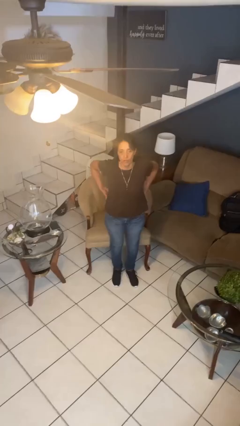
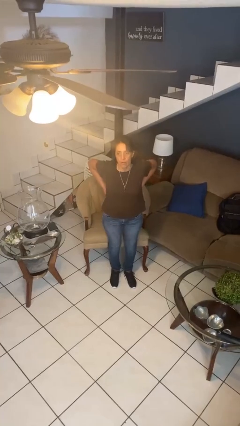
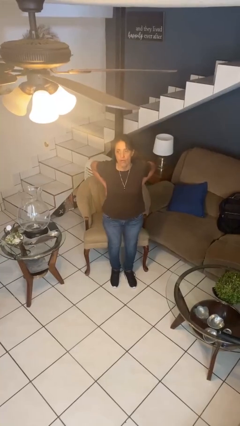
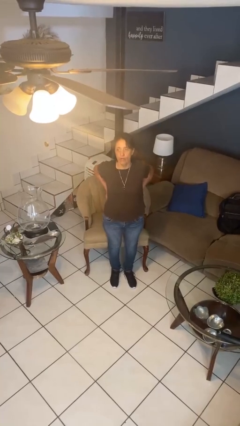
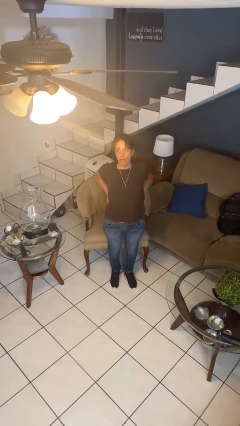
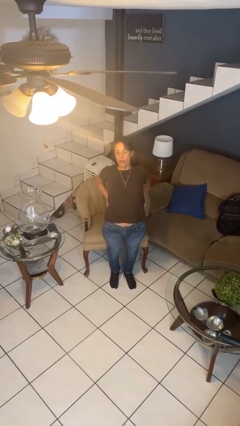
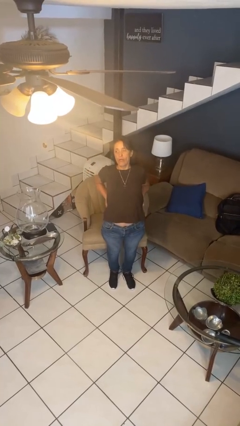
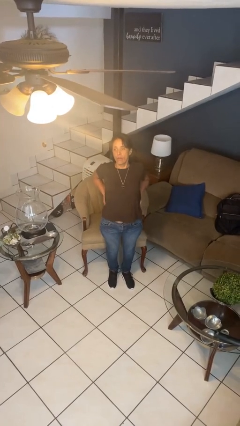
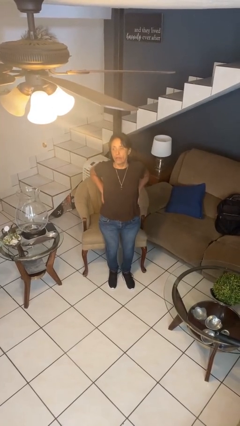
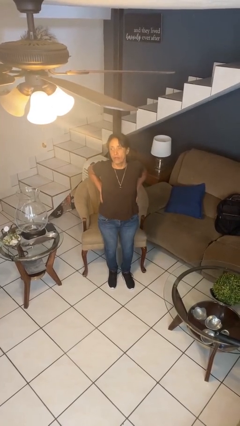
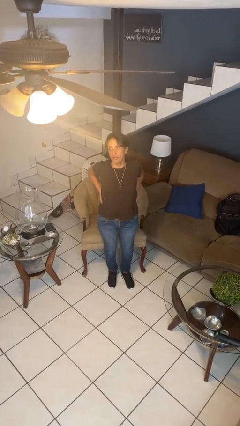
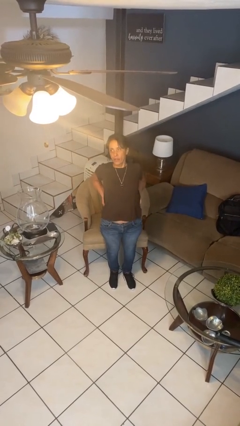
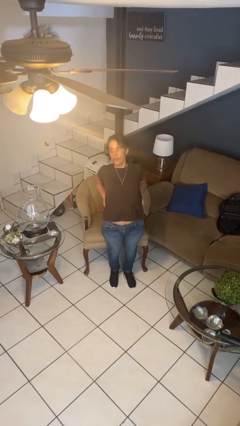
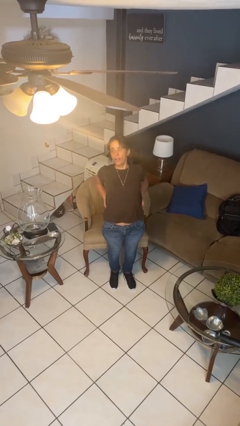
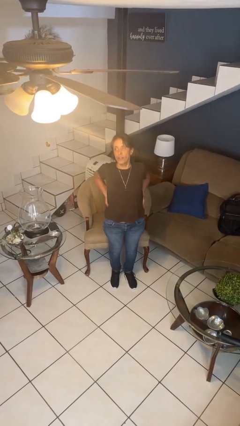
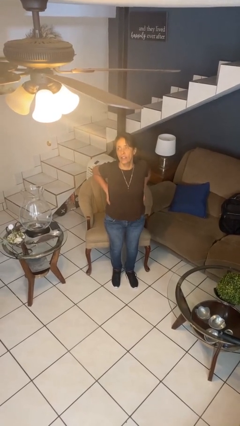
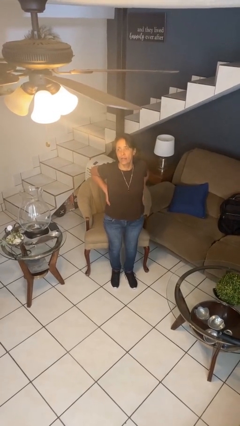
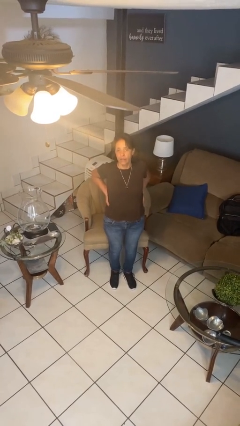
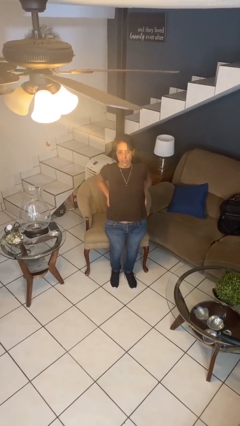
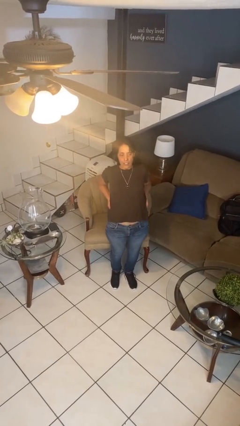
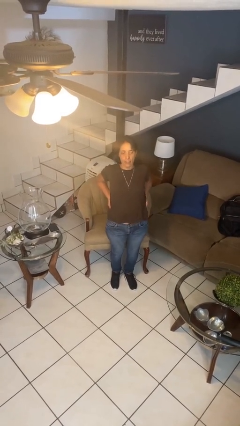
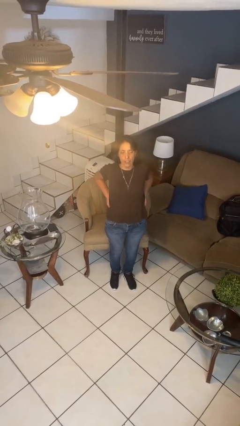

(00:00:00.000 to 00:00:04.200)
person stretches back

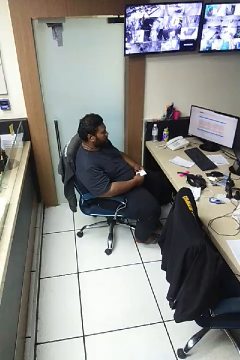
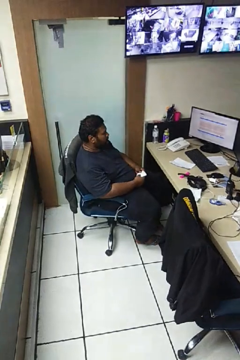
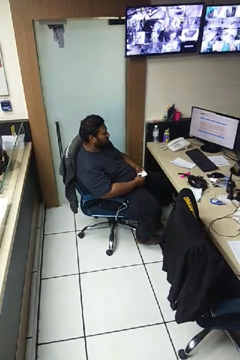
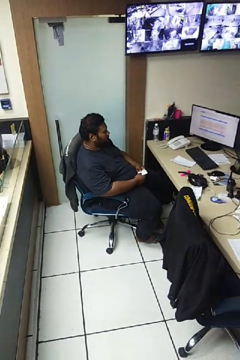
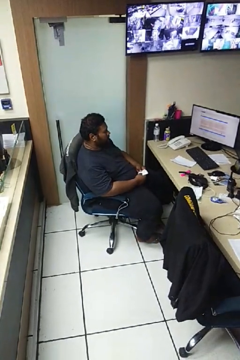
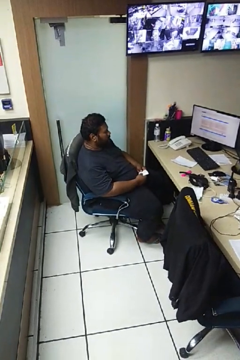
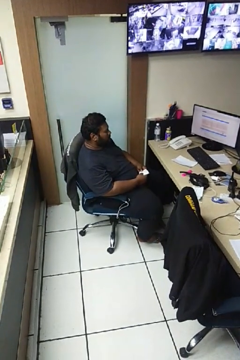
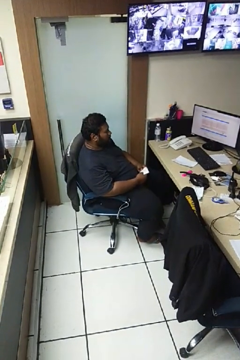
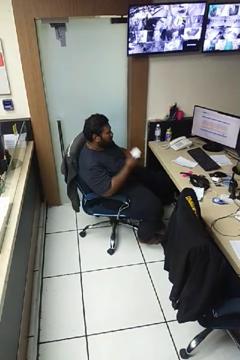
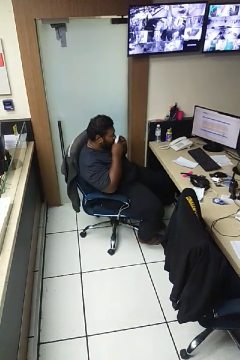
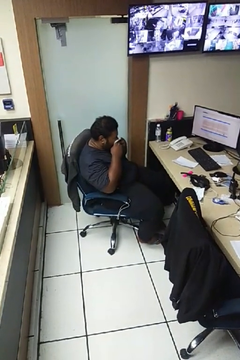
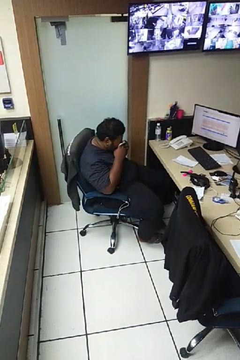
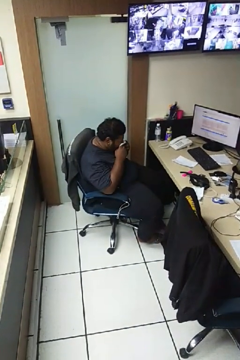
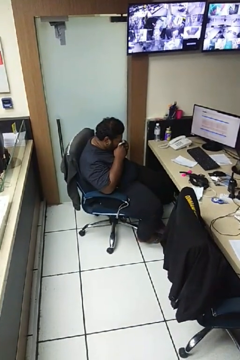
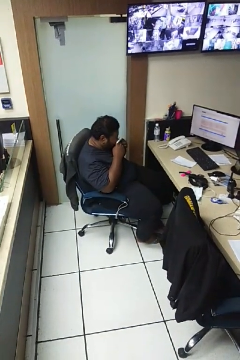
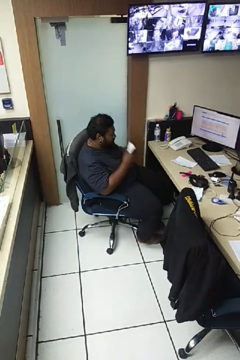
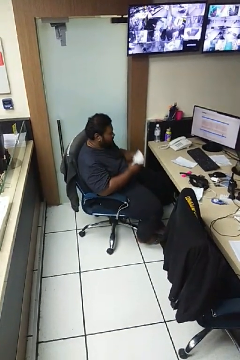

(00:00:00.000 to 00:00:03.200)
person blows nose

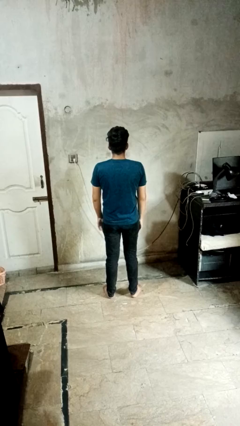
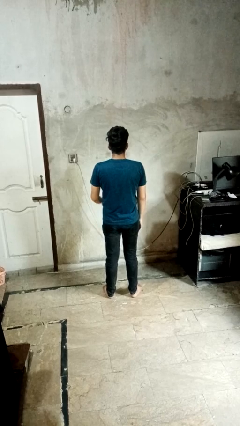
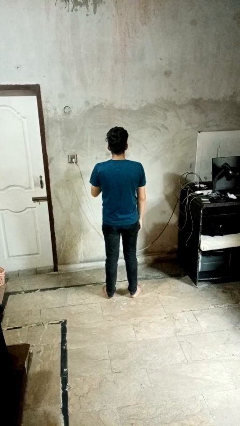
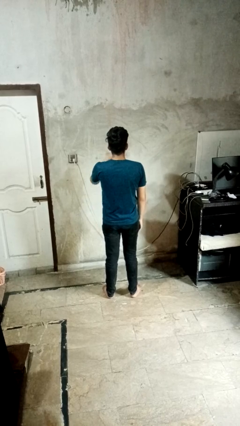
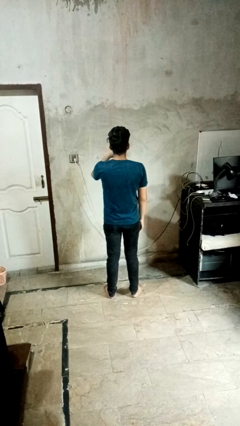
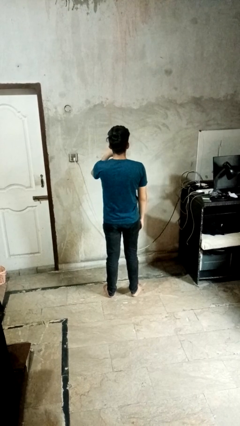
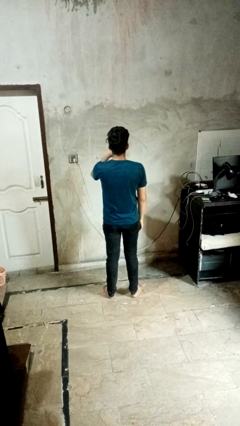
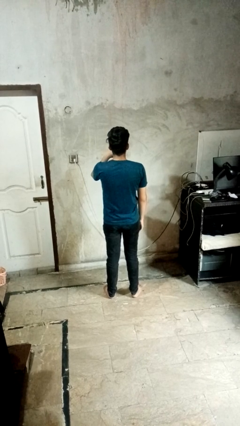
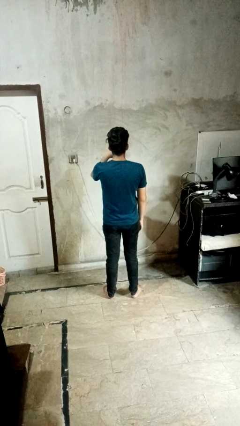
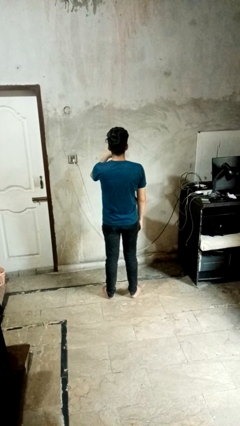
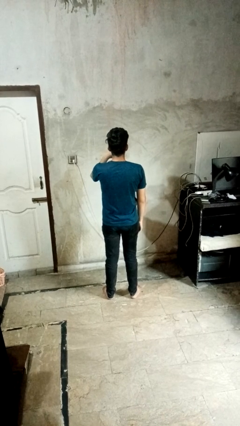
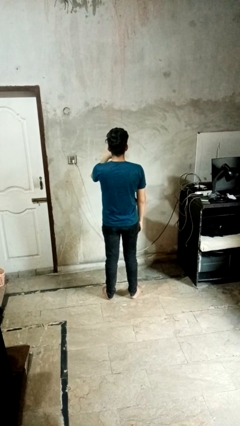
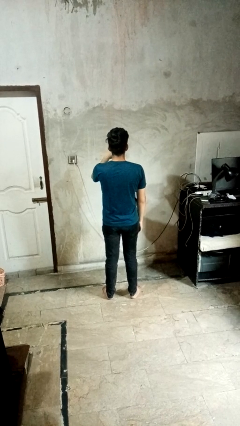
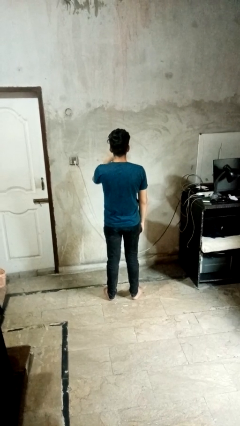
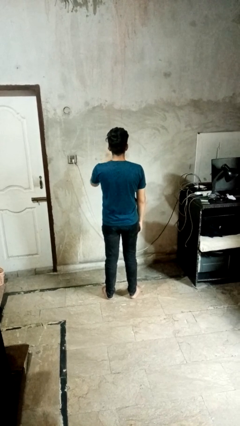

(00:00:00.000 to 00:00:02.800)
person yawns

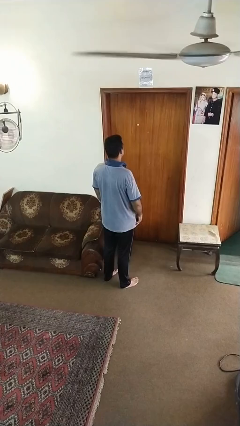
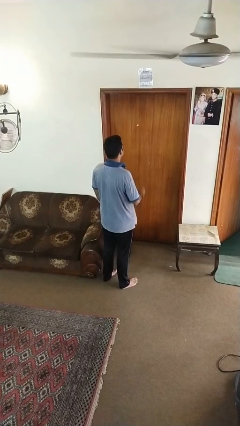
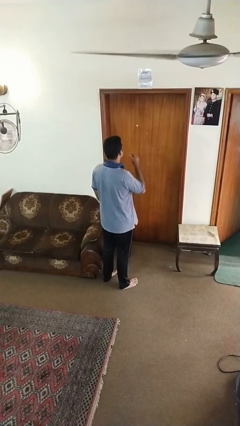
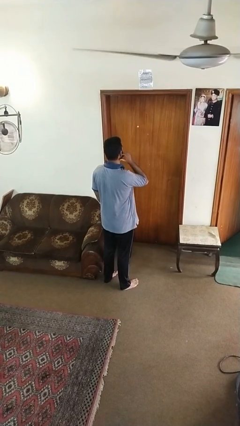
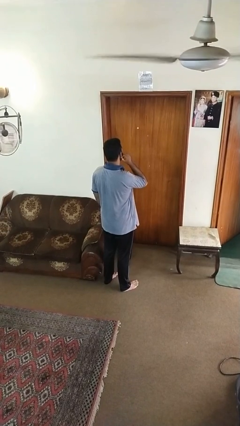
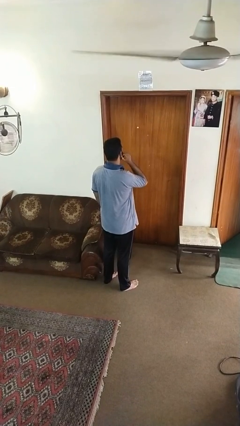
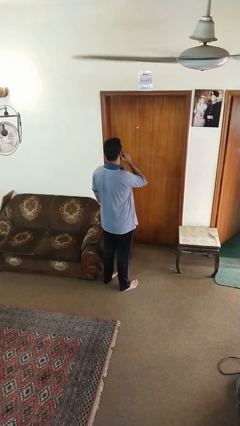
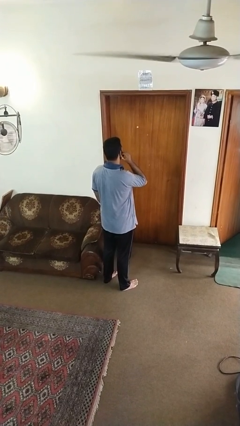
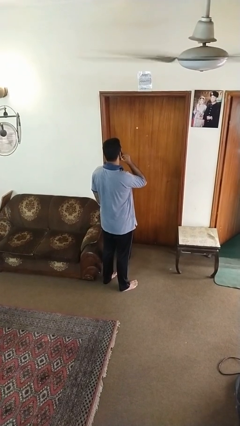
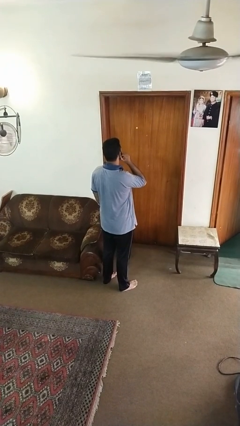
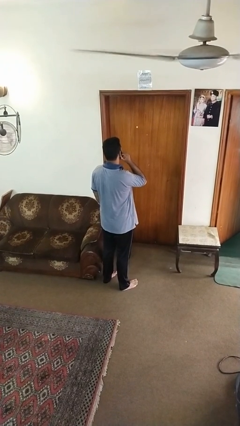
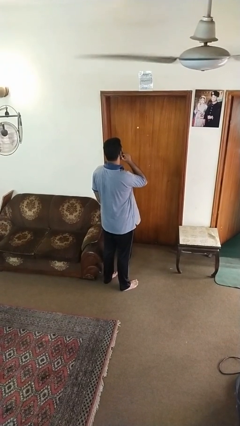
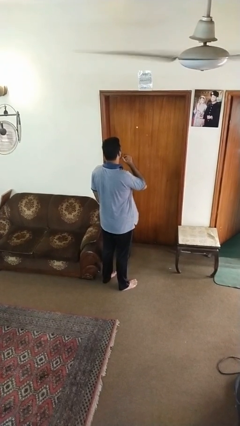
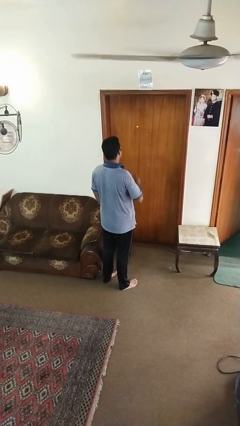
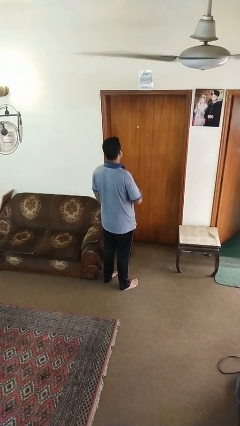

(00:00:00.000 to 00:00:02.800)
person touches earlobe

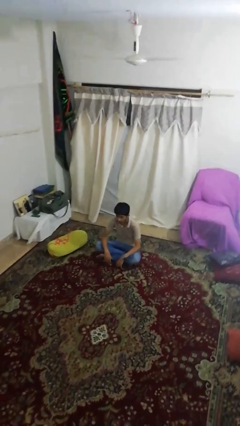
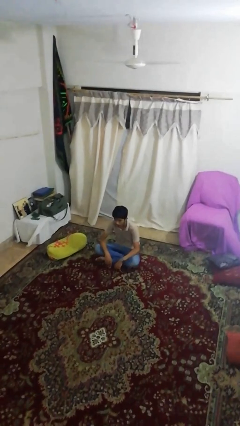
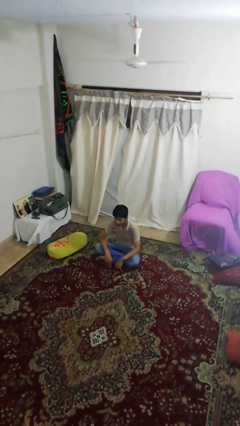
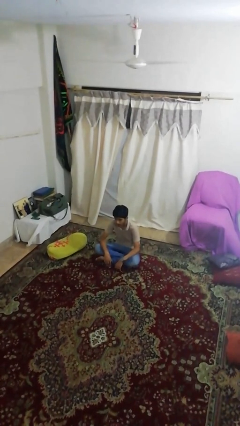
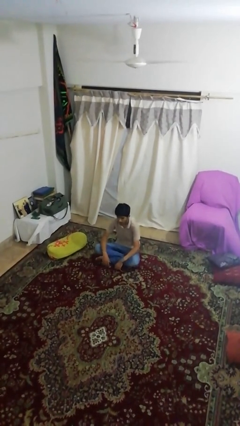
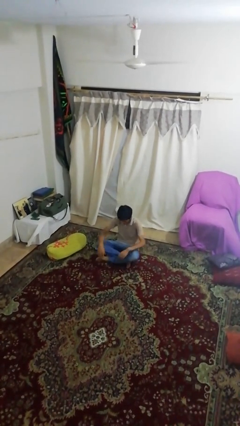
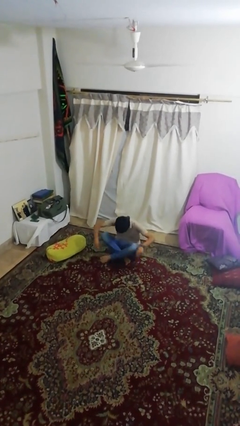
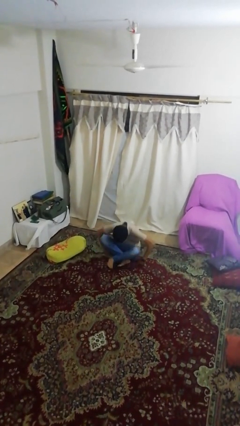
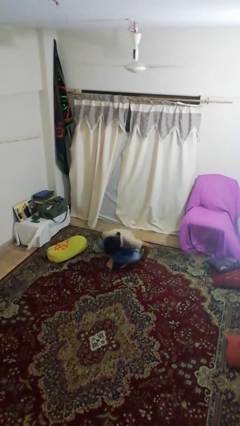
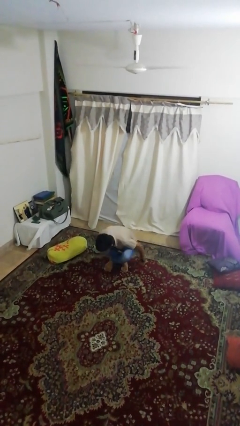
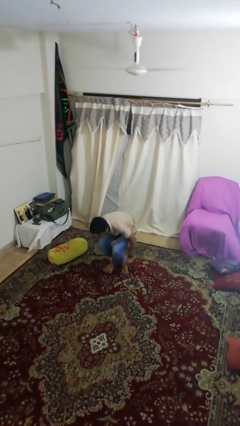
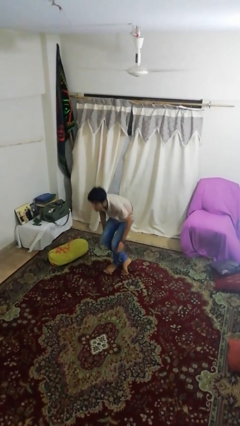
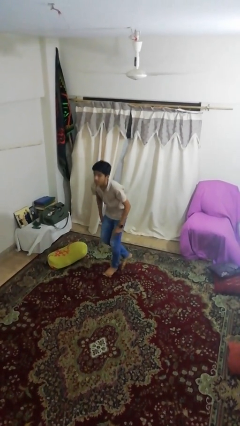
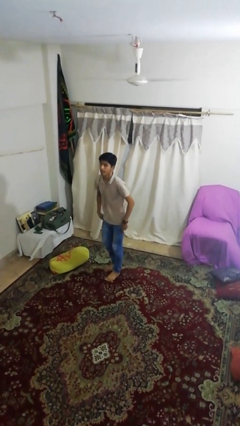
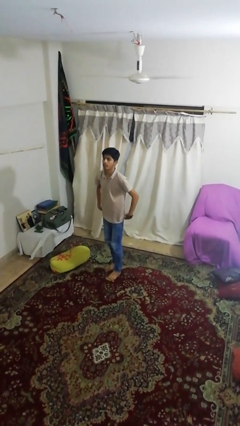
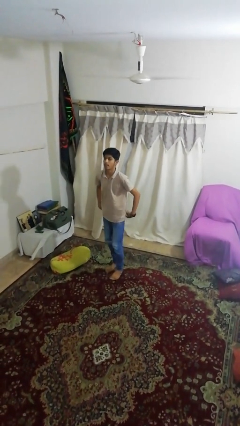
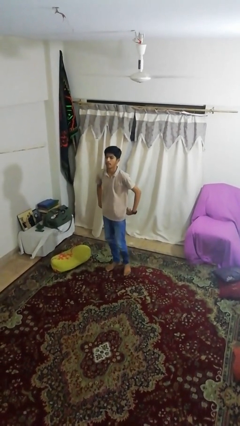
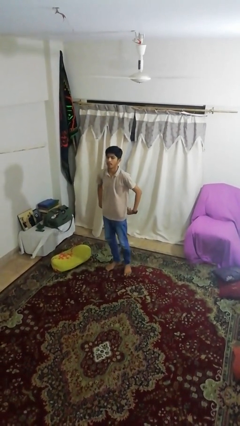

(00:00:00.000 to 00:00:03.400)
person stands up from floor

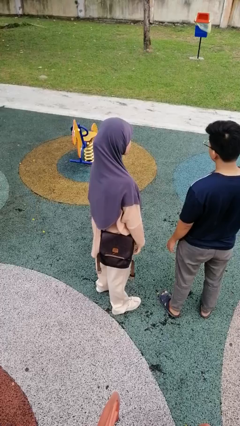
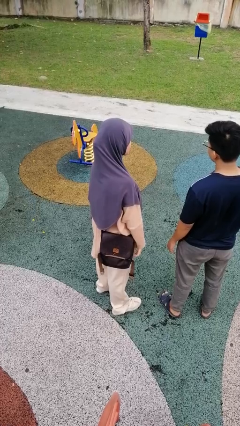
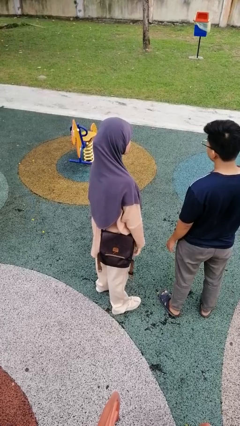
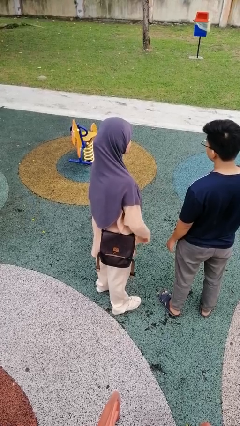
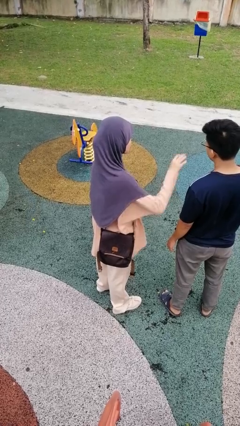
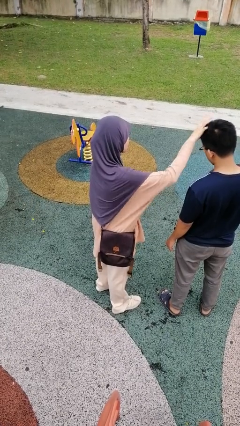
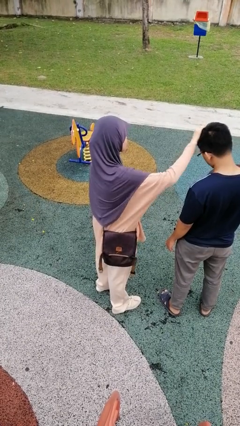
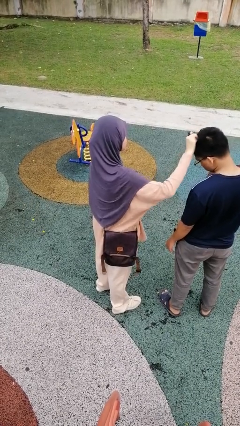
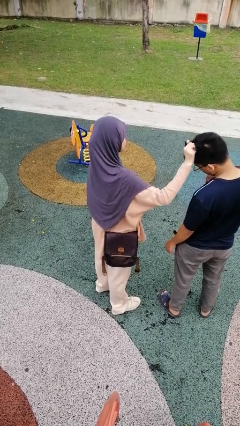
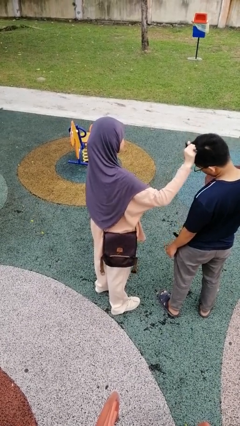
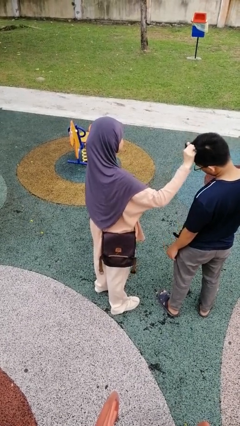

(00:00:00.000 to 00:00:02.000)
person grabs person by hair
